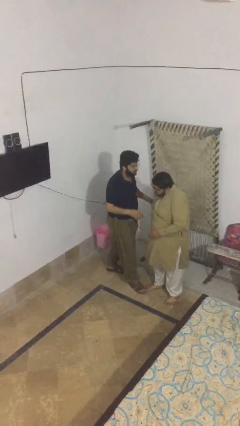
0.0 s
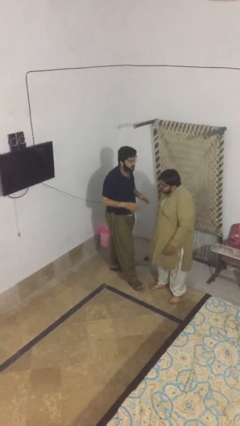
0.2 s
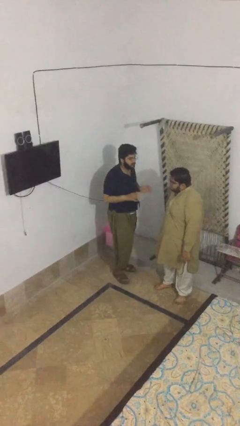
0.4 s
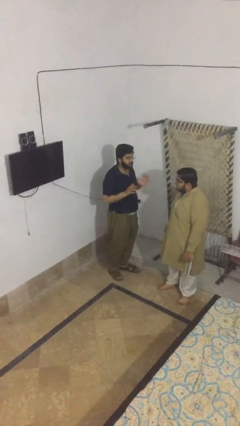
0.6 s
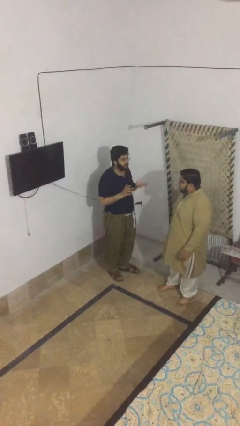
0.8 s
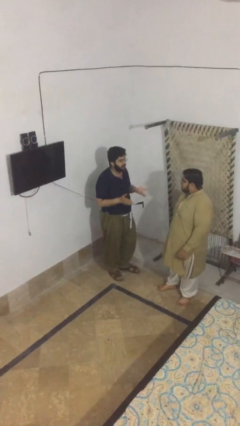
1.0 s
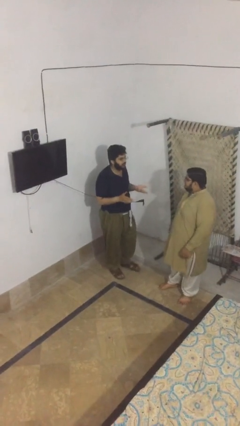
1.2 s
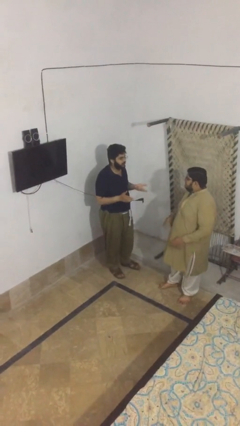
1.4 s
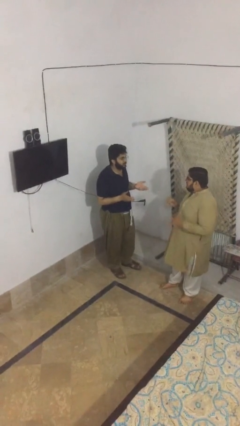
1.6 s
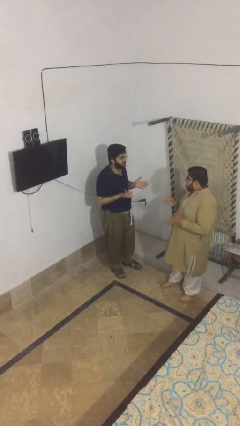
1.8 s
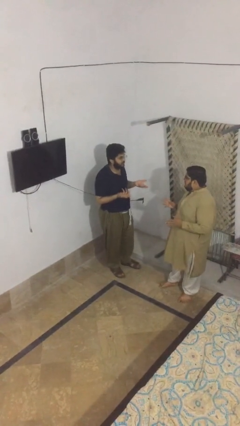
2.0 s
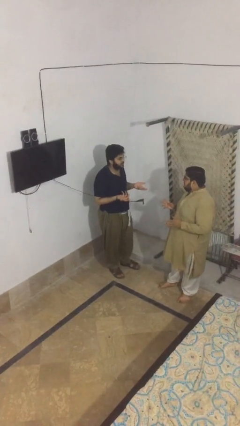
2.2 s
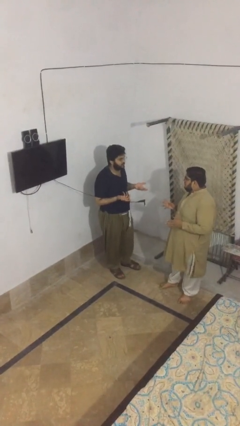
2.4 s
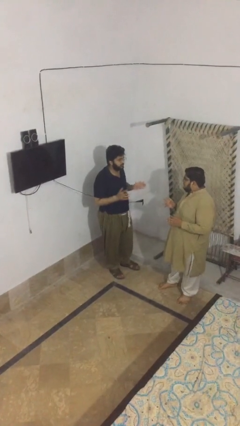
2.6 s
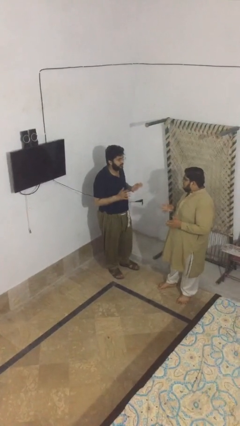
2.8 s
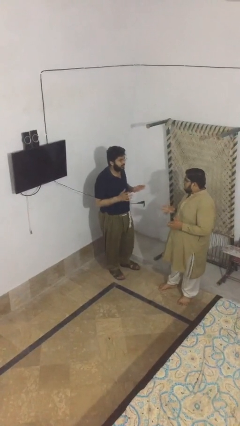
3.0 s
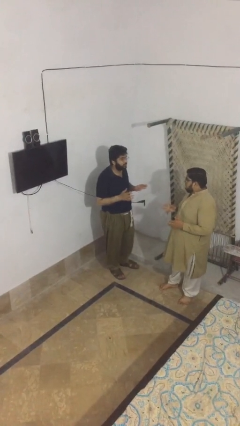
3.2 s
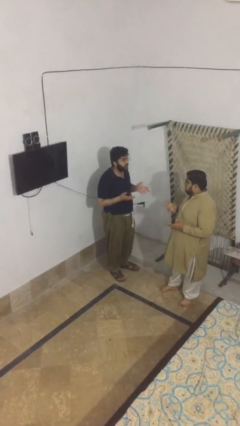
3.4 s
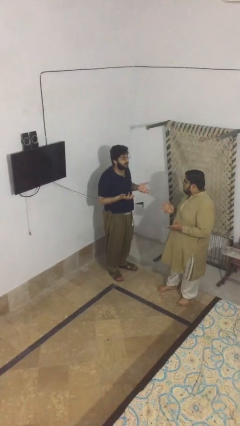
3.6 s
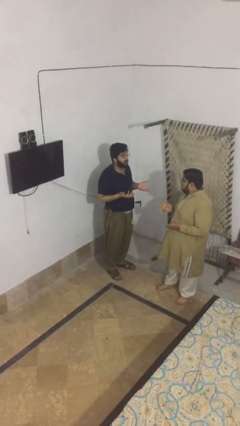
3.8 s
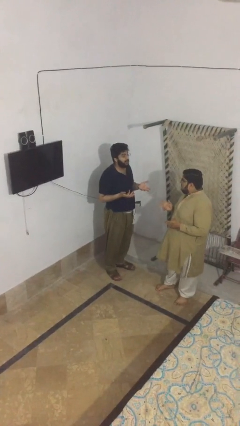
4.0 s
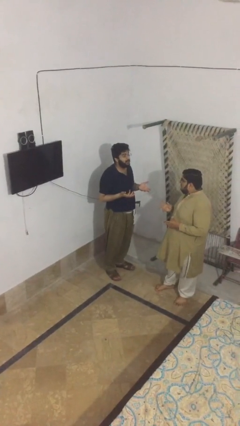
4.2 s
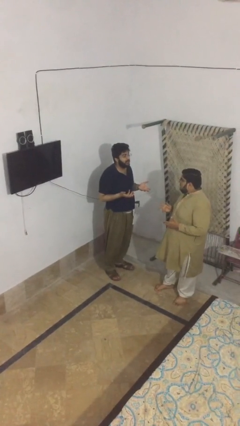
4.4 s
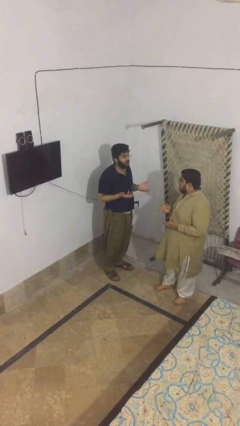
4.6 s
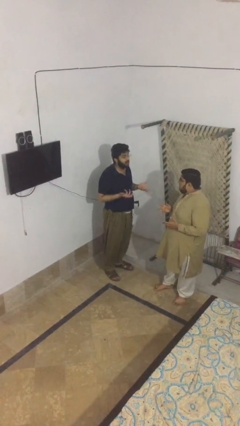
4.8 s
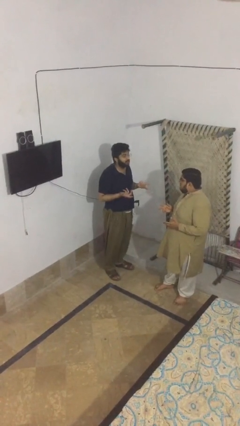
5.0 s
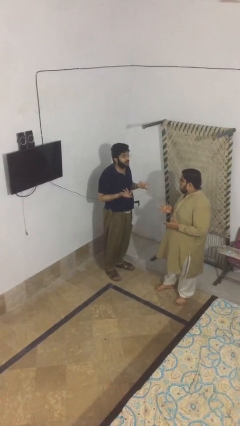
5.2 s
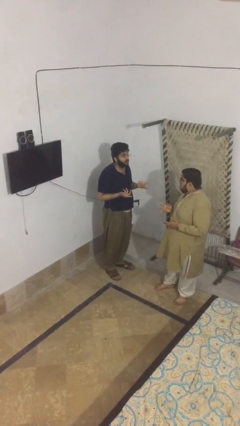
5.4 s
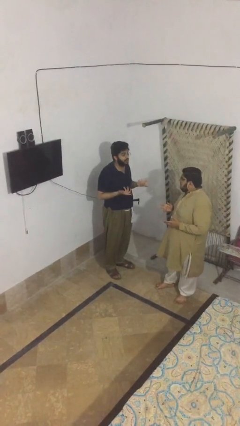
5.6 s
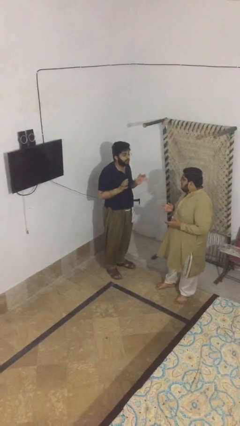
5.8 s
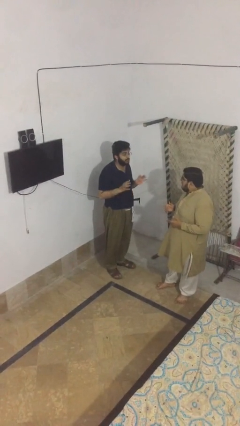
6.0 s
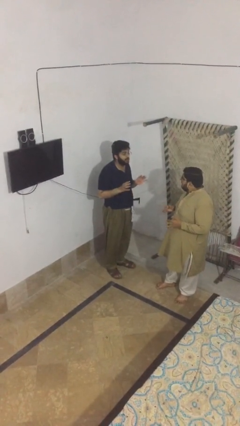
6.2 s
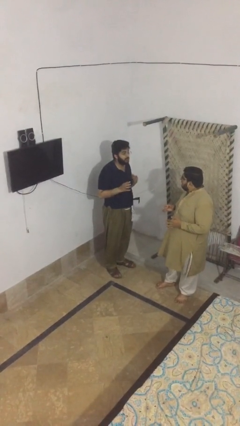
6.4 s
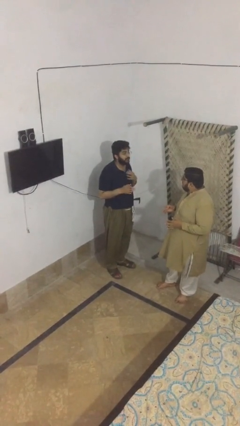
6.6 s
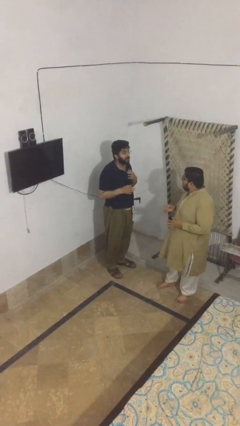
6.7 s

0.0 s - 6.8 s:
person talks to person

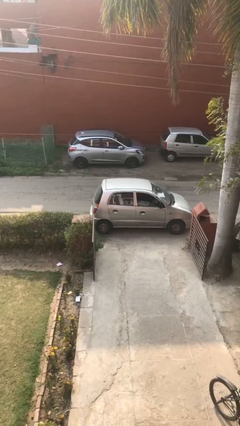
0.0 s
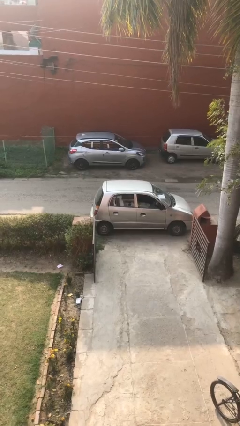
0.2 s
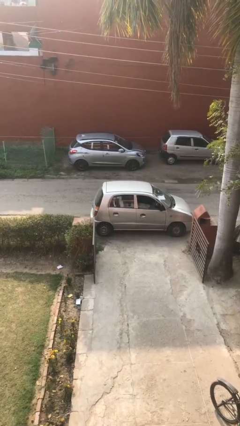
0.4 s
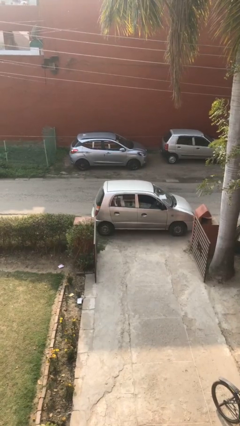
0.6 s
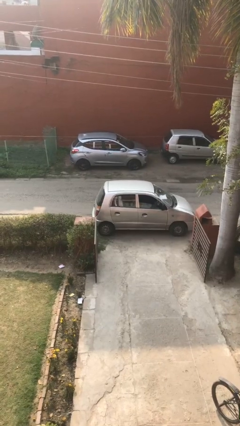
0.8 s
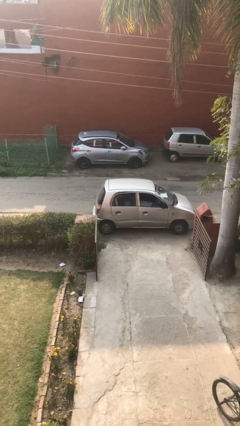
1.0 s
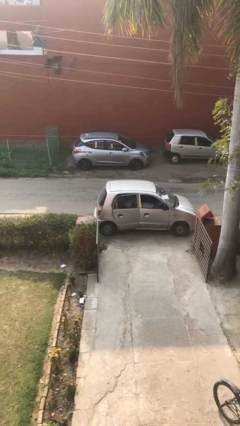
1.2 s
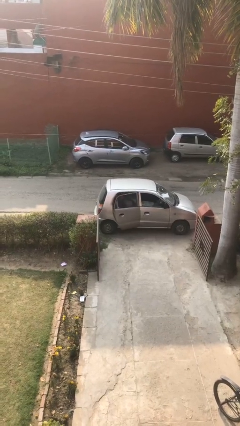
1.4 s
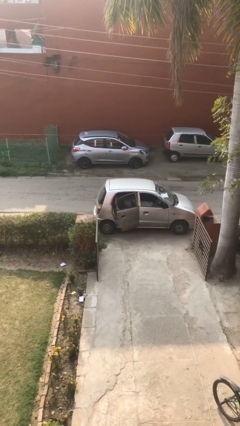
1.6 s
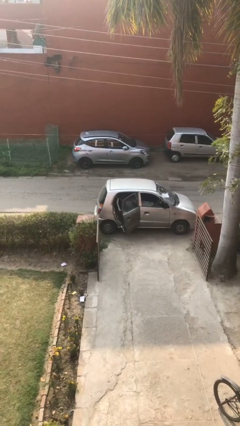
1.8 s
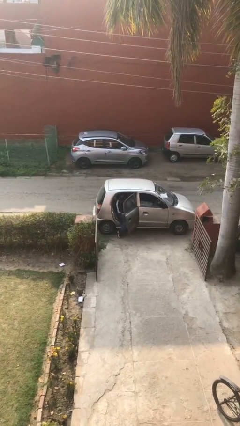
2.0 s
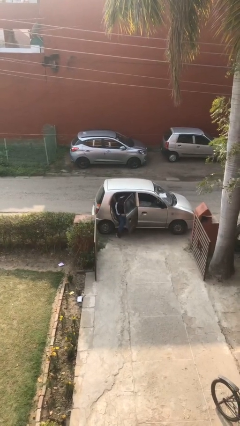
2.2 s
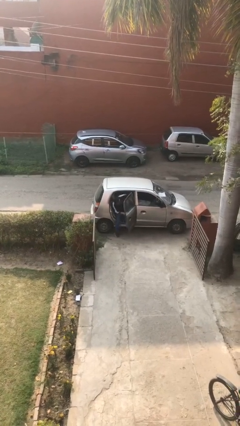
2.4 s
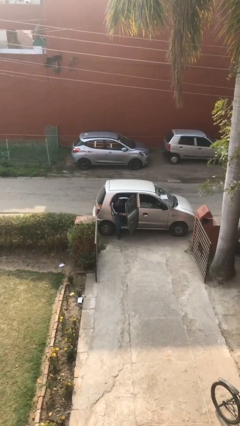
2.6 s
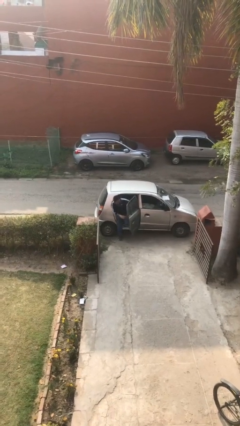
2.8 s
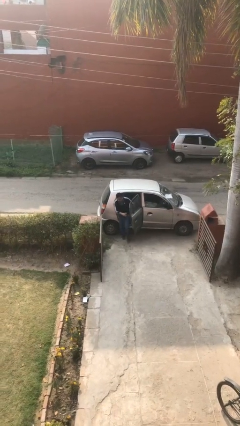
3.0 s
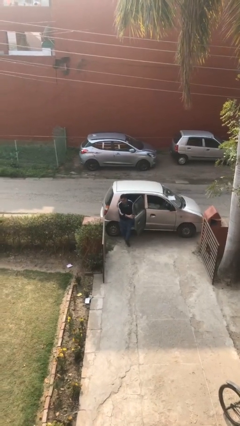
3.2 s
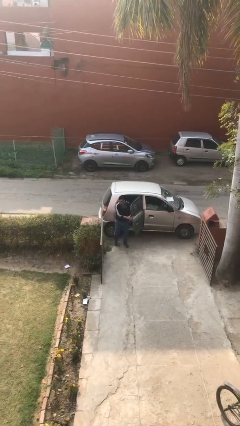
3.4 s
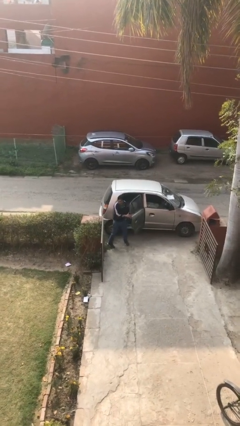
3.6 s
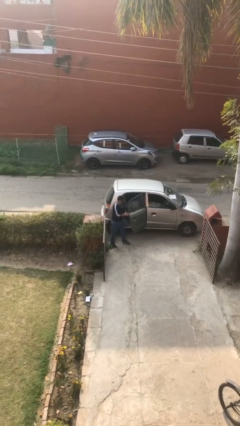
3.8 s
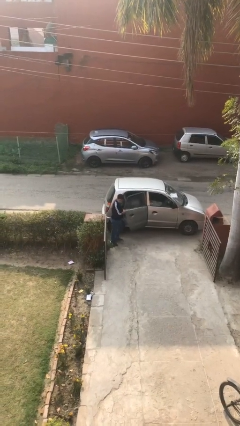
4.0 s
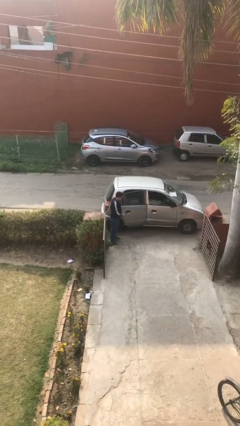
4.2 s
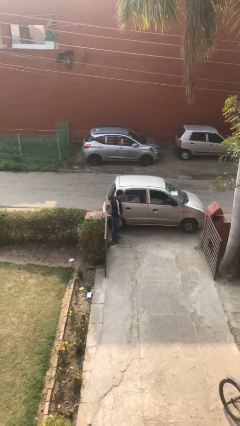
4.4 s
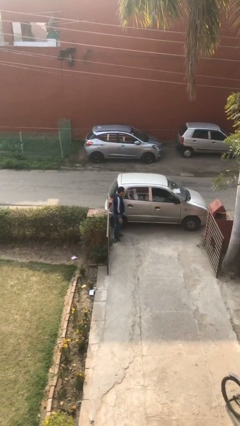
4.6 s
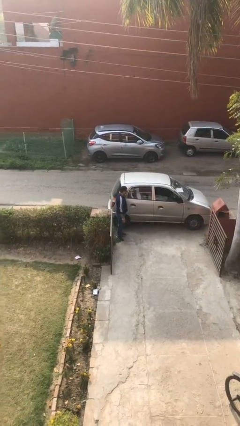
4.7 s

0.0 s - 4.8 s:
person exits car

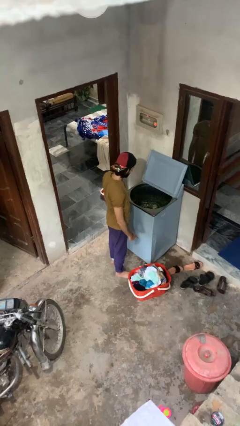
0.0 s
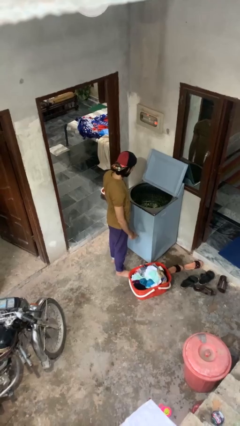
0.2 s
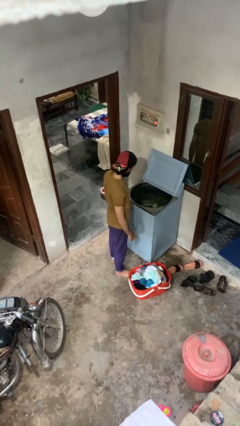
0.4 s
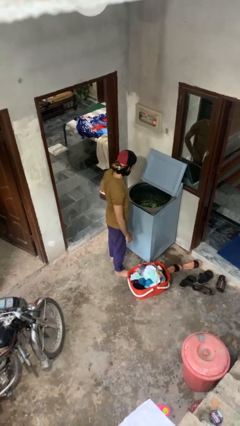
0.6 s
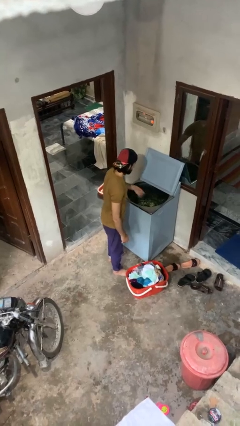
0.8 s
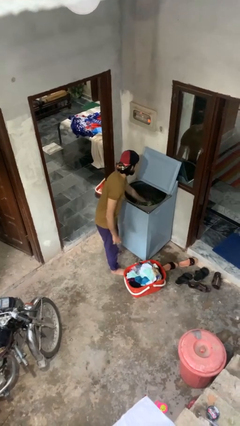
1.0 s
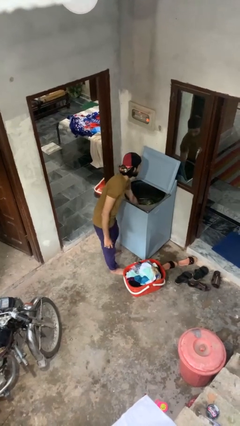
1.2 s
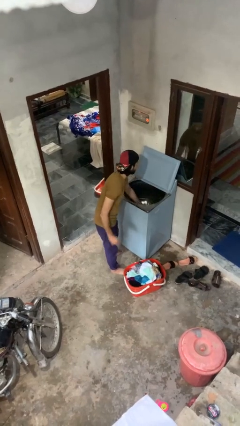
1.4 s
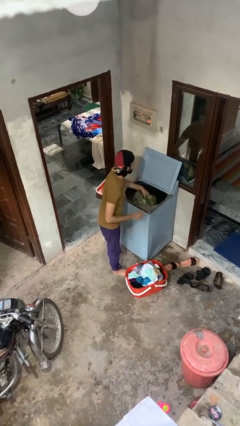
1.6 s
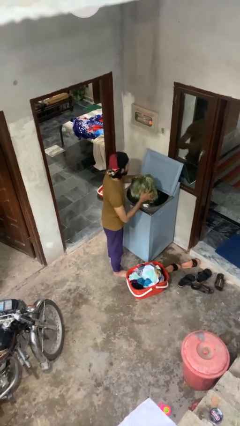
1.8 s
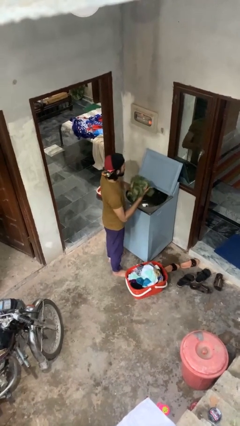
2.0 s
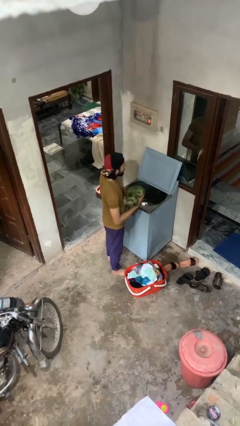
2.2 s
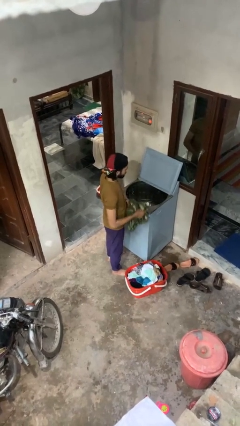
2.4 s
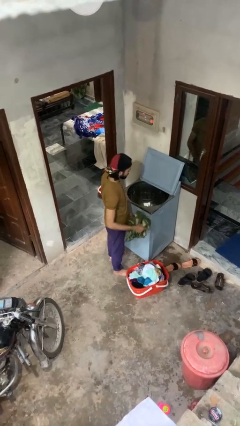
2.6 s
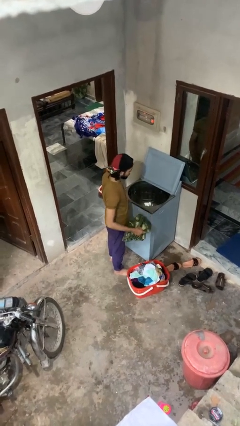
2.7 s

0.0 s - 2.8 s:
person unloads clotheswasher

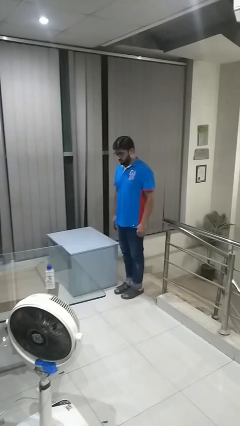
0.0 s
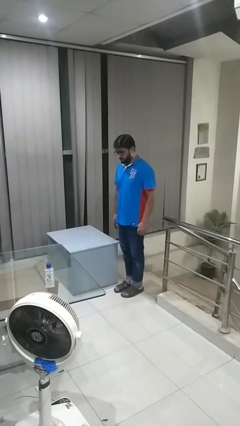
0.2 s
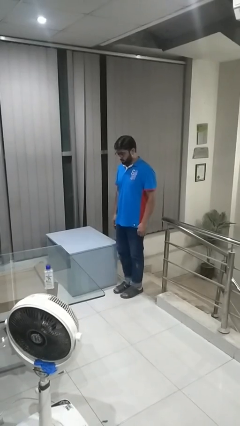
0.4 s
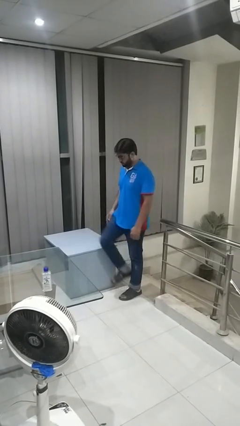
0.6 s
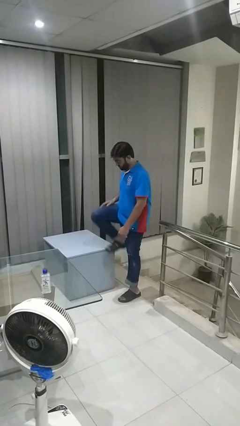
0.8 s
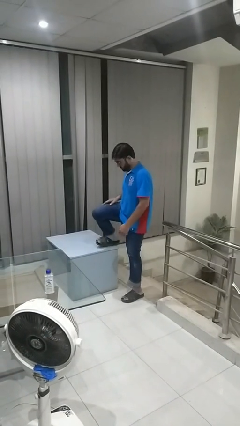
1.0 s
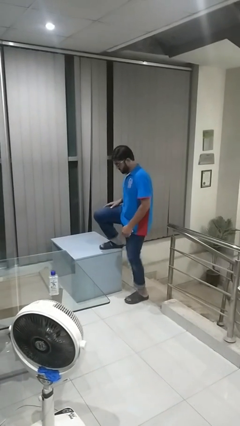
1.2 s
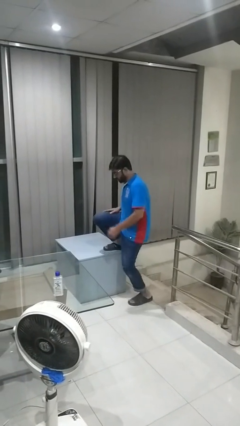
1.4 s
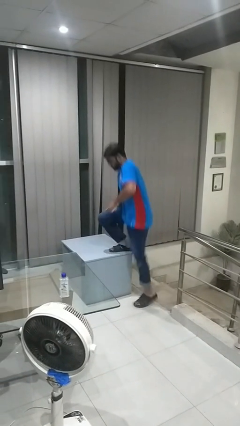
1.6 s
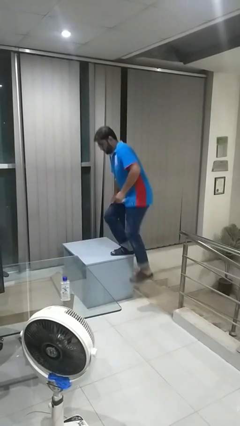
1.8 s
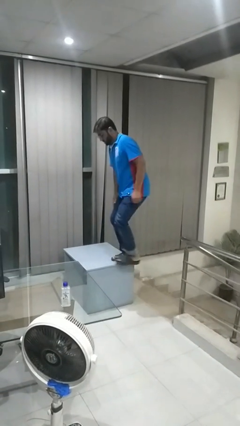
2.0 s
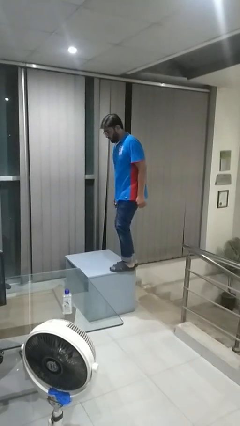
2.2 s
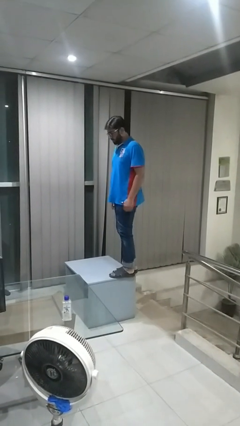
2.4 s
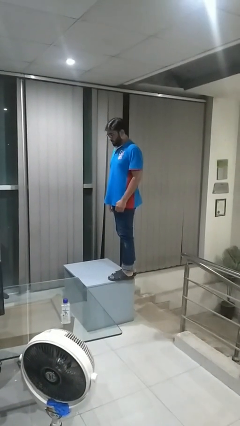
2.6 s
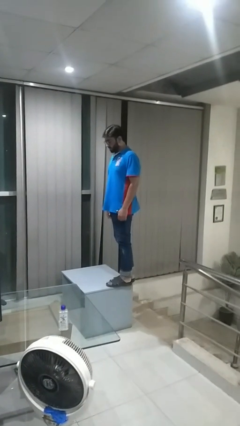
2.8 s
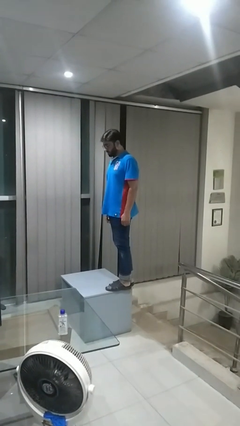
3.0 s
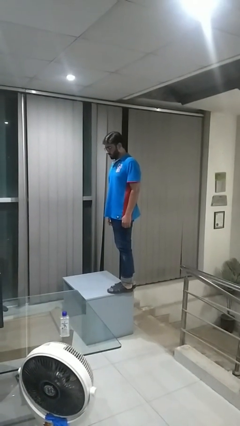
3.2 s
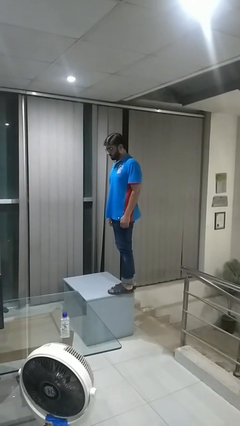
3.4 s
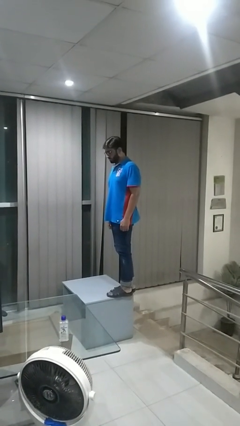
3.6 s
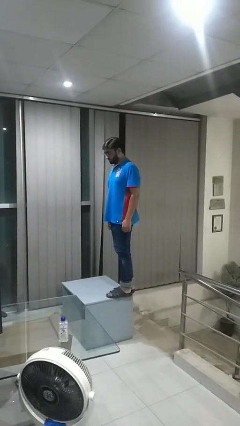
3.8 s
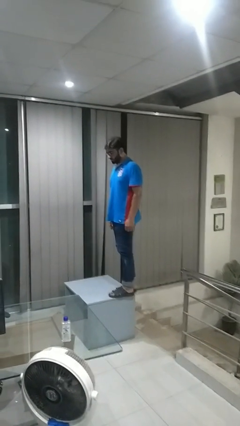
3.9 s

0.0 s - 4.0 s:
person climbs on table
